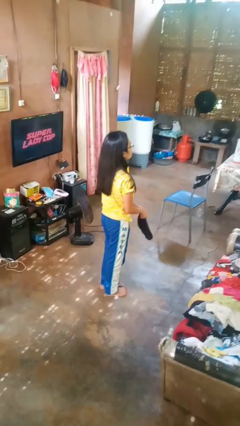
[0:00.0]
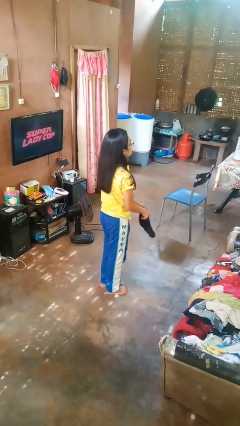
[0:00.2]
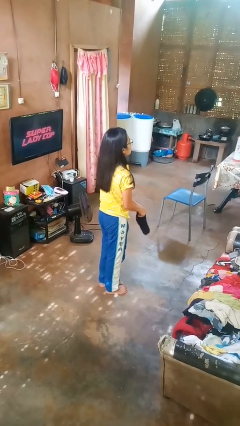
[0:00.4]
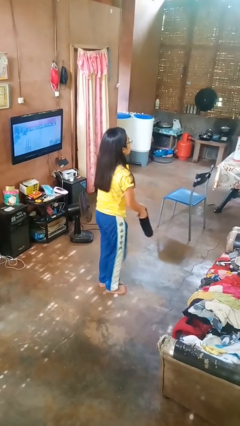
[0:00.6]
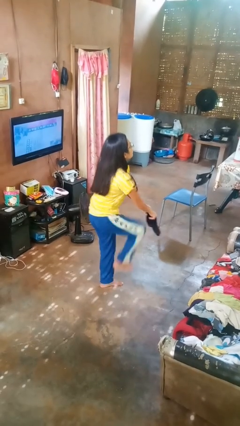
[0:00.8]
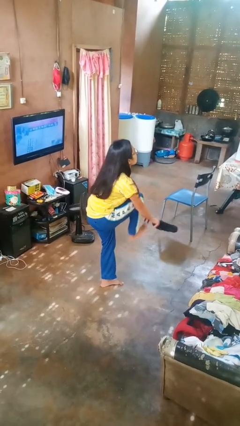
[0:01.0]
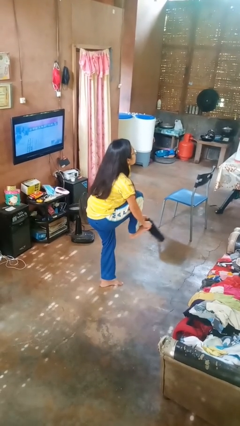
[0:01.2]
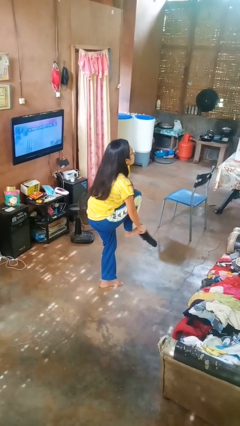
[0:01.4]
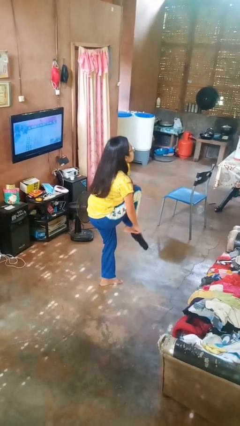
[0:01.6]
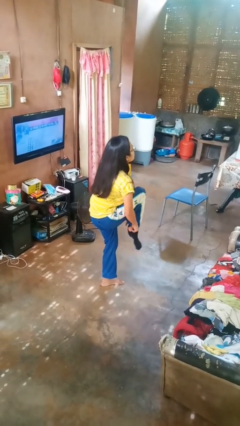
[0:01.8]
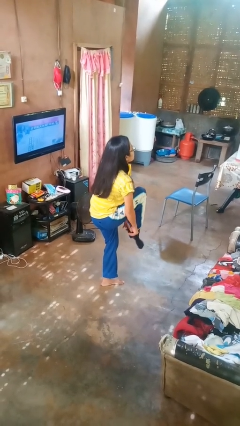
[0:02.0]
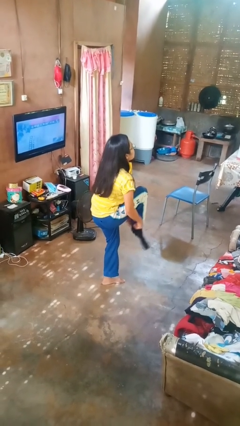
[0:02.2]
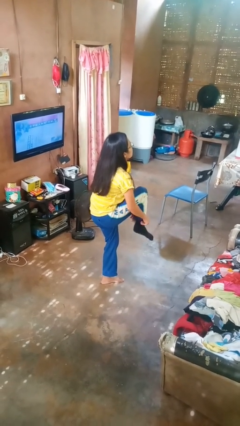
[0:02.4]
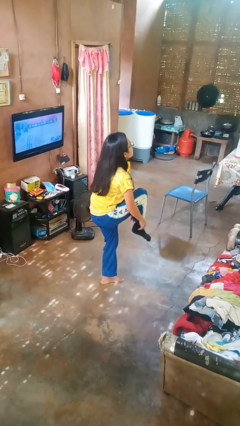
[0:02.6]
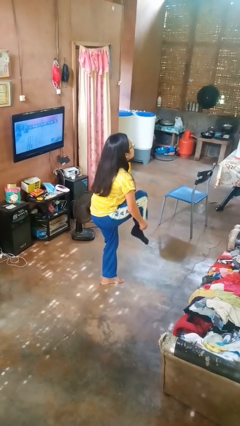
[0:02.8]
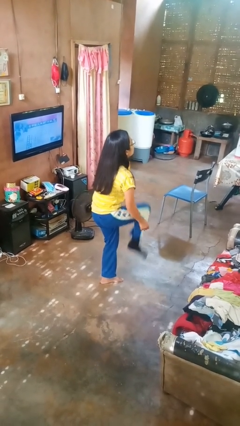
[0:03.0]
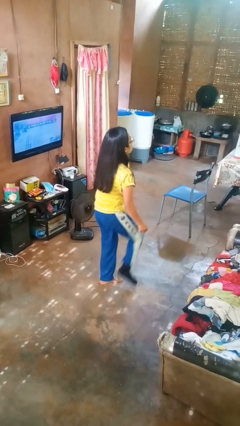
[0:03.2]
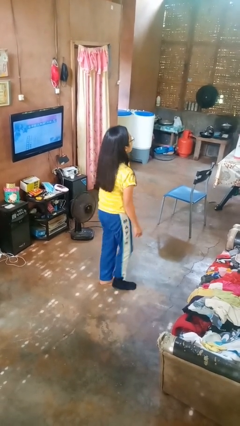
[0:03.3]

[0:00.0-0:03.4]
person puts on socks

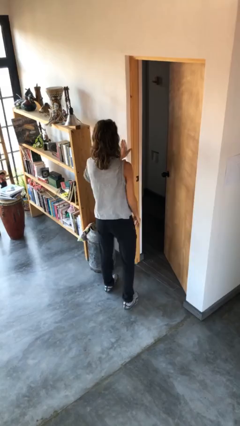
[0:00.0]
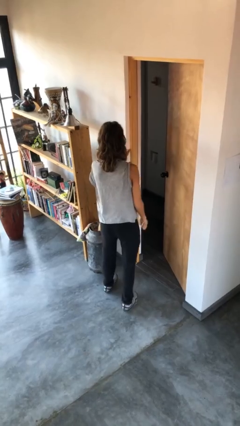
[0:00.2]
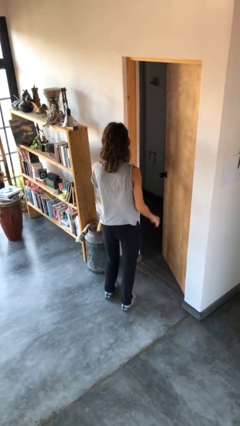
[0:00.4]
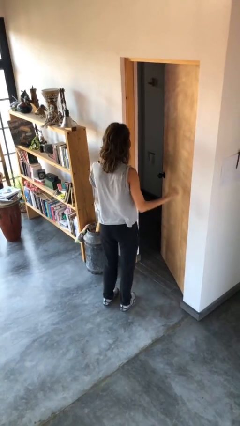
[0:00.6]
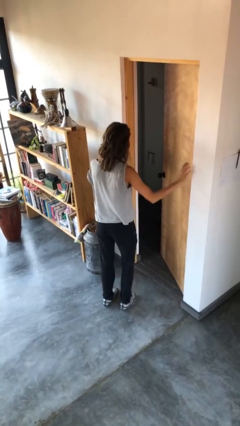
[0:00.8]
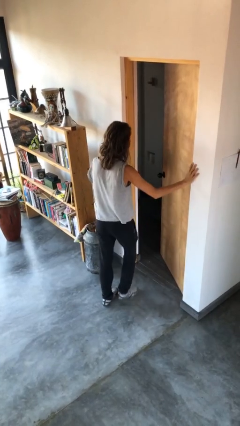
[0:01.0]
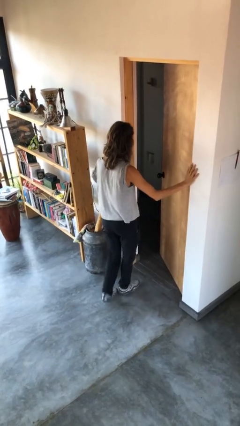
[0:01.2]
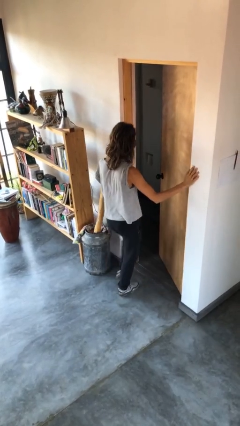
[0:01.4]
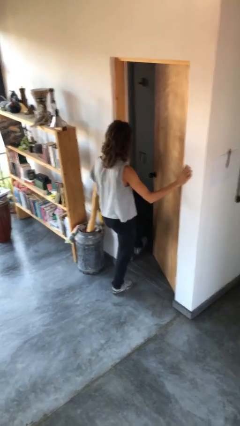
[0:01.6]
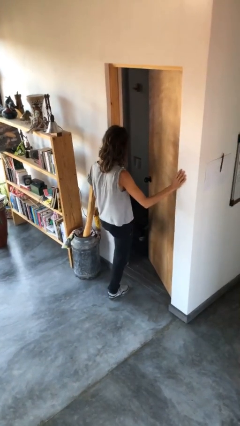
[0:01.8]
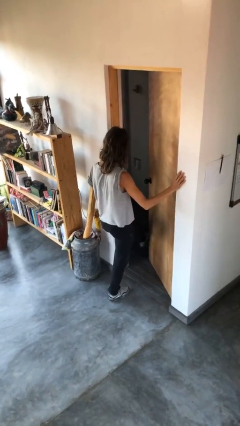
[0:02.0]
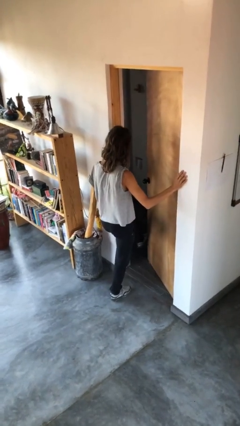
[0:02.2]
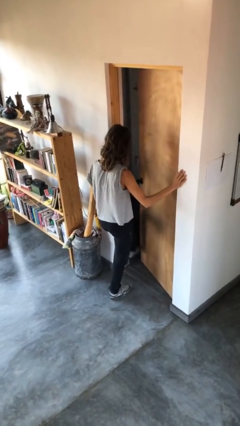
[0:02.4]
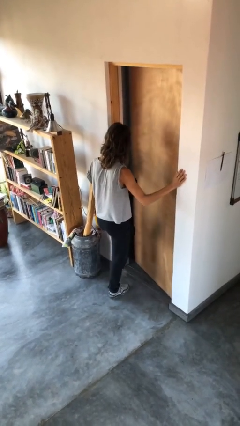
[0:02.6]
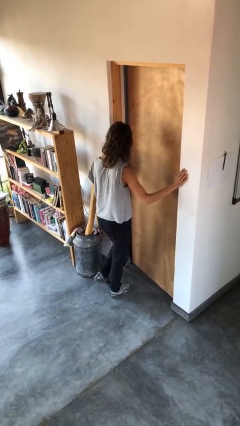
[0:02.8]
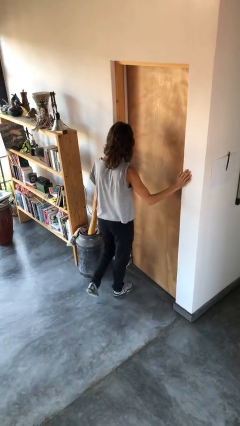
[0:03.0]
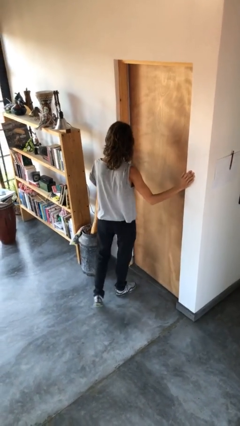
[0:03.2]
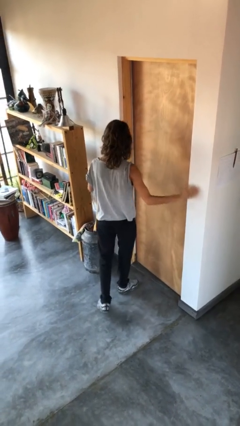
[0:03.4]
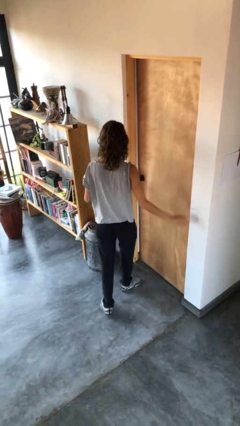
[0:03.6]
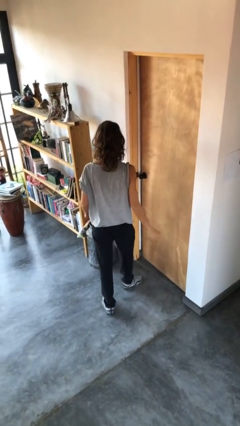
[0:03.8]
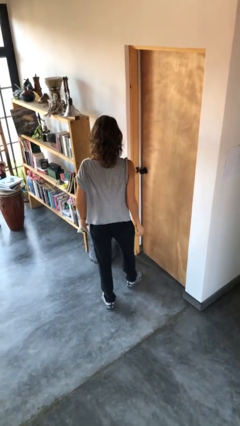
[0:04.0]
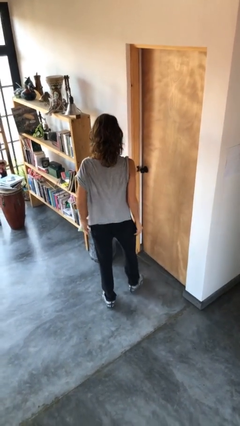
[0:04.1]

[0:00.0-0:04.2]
person closes door with foot

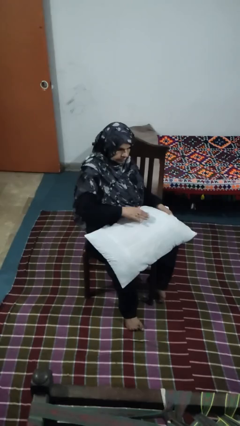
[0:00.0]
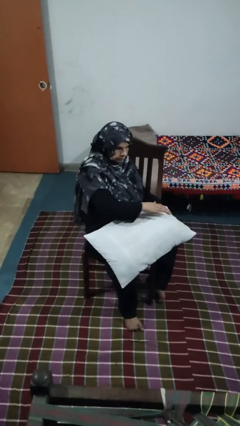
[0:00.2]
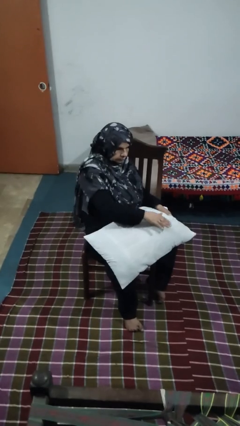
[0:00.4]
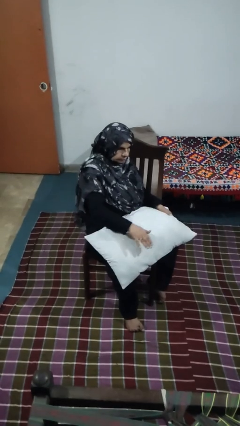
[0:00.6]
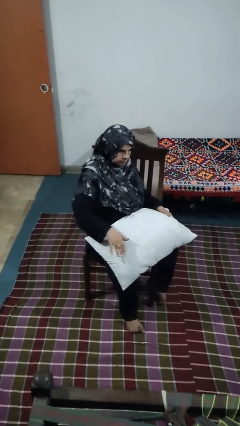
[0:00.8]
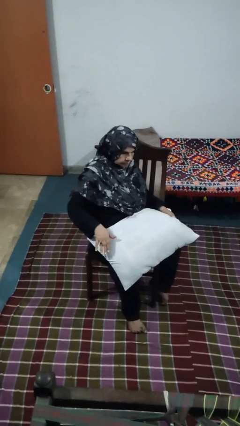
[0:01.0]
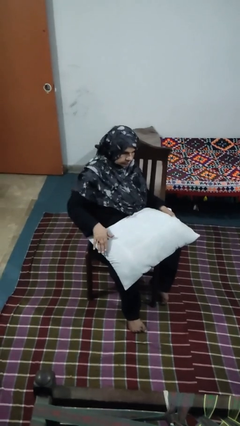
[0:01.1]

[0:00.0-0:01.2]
person waves hand over object

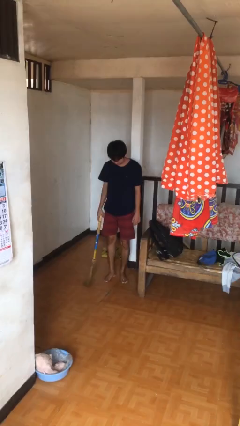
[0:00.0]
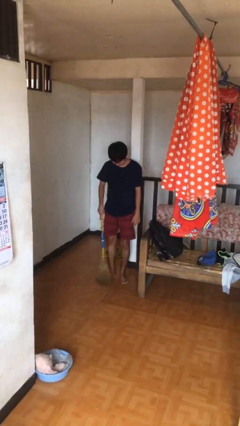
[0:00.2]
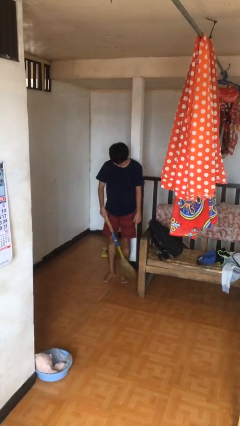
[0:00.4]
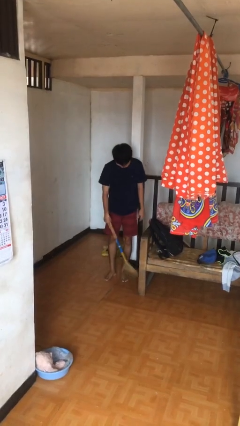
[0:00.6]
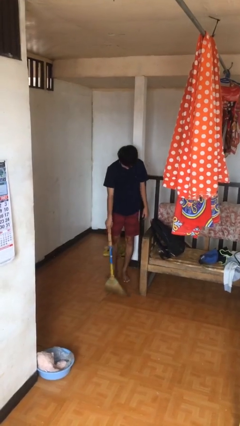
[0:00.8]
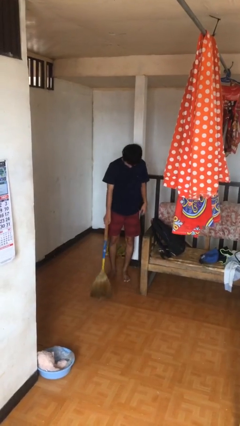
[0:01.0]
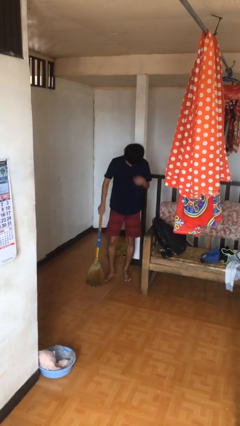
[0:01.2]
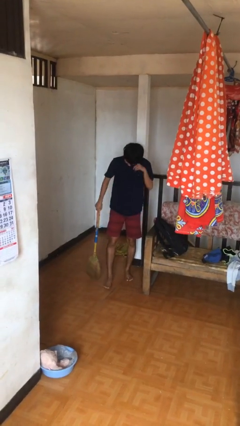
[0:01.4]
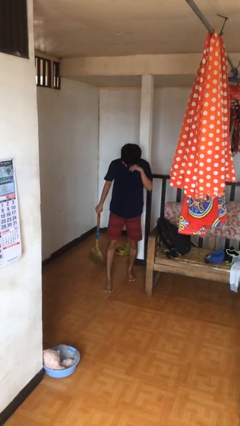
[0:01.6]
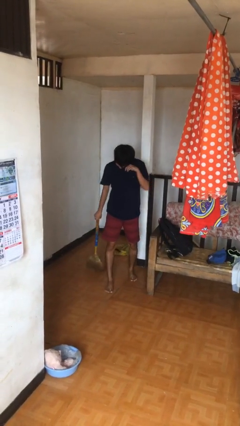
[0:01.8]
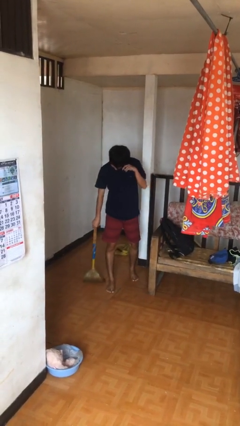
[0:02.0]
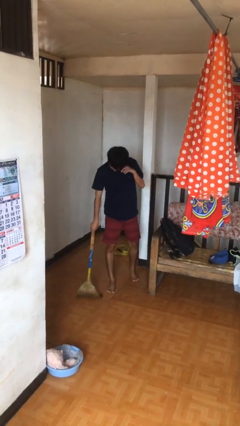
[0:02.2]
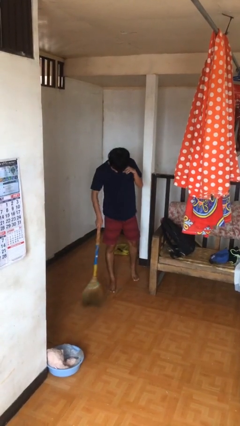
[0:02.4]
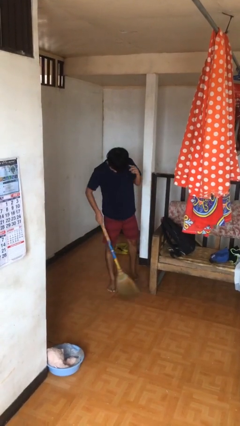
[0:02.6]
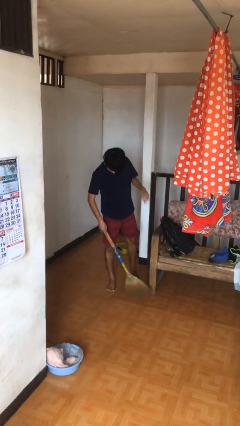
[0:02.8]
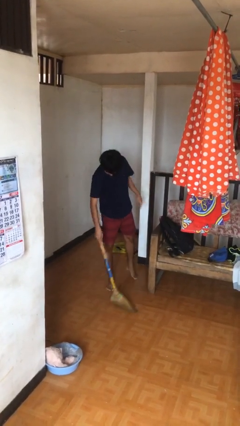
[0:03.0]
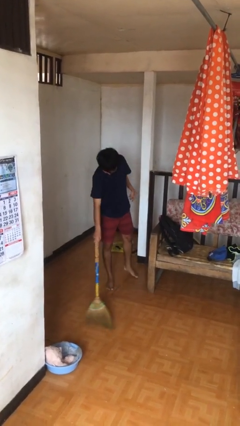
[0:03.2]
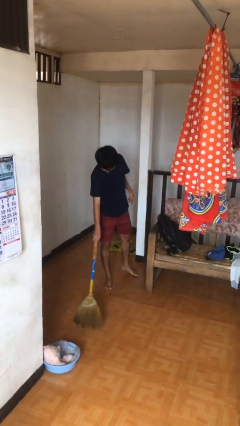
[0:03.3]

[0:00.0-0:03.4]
person sweeps floor

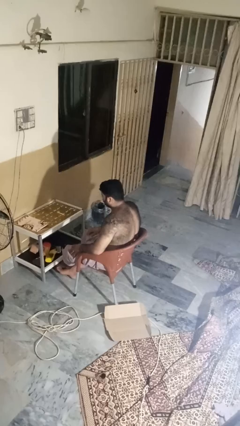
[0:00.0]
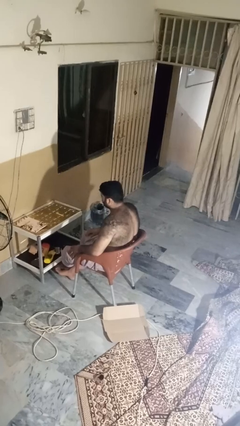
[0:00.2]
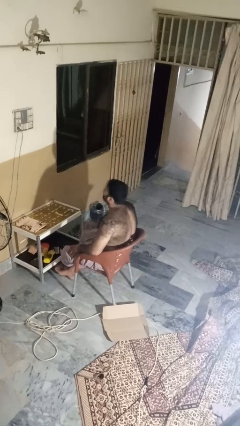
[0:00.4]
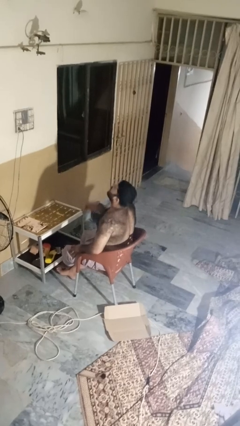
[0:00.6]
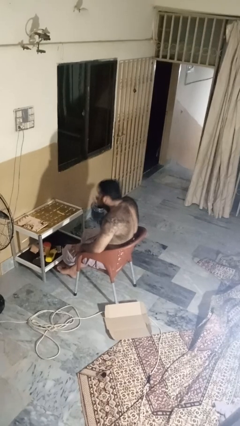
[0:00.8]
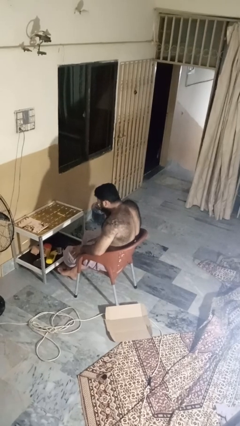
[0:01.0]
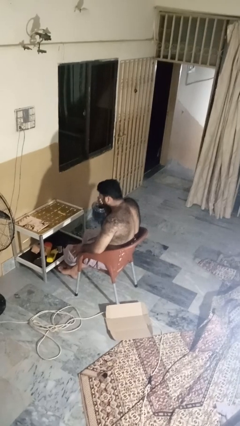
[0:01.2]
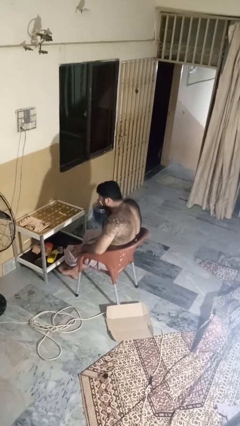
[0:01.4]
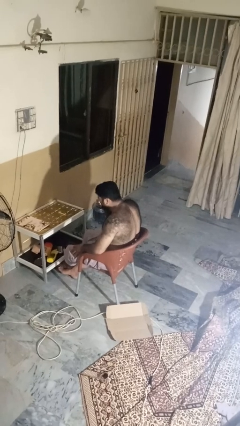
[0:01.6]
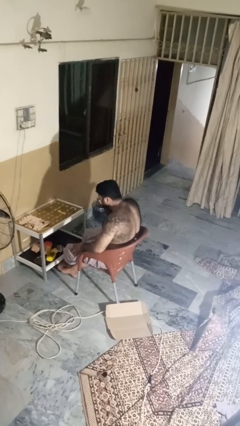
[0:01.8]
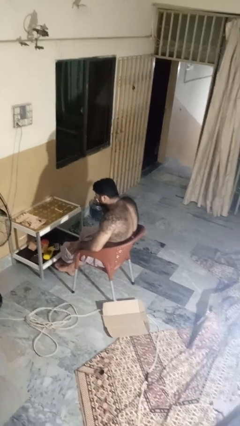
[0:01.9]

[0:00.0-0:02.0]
person sneezes into hand

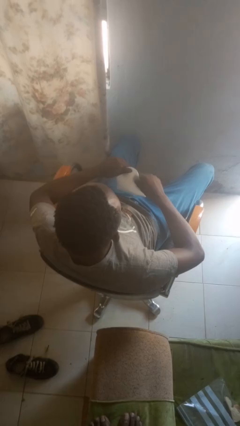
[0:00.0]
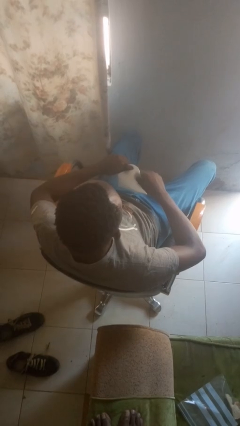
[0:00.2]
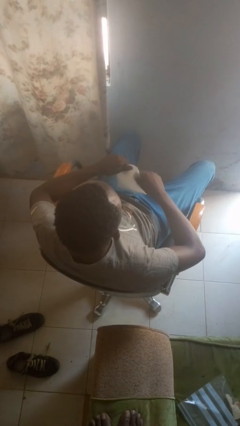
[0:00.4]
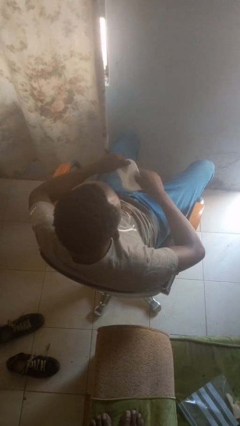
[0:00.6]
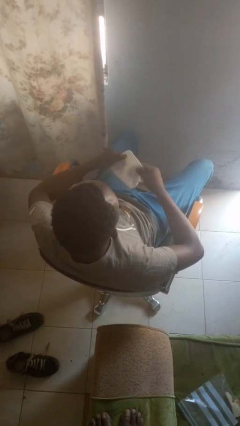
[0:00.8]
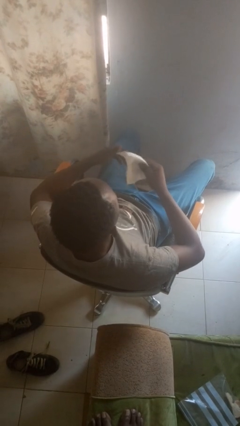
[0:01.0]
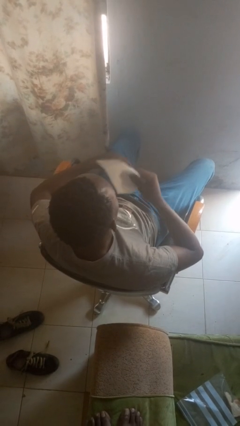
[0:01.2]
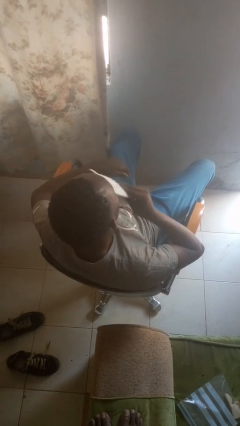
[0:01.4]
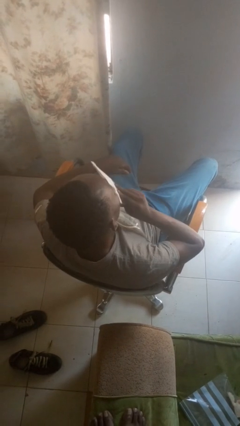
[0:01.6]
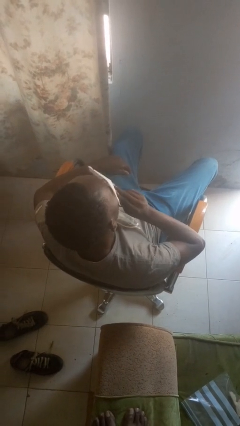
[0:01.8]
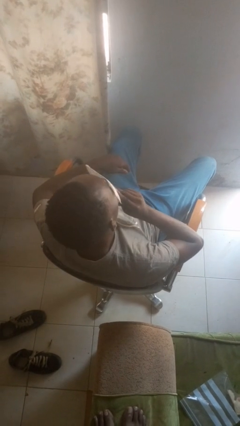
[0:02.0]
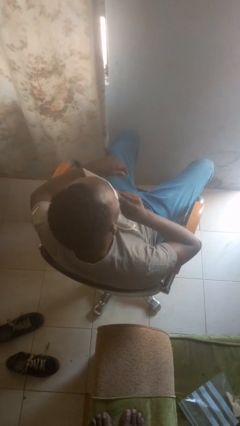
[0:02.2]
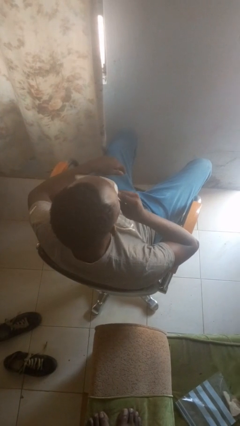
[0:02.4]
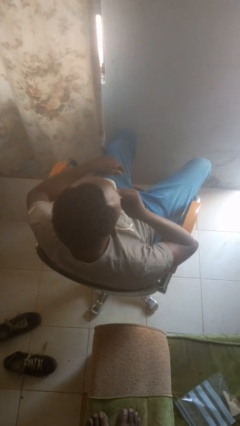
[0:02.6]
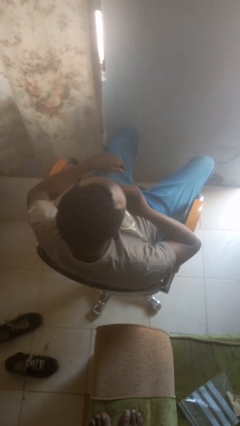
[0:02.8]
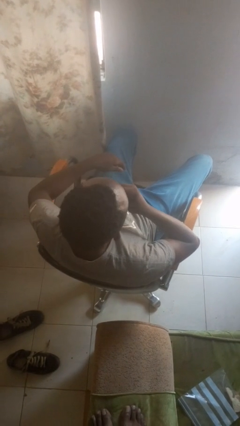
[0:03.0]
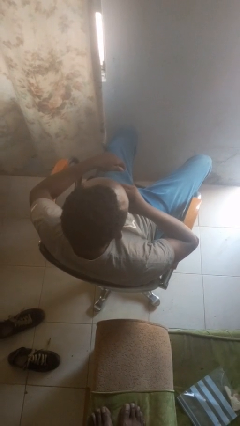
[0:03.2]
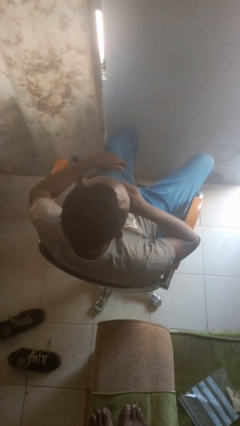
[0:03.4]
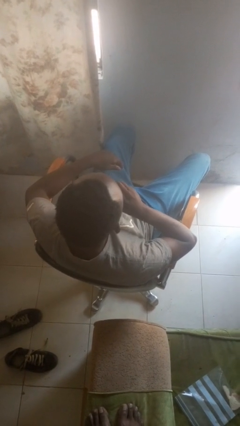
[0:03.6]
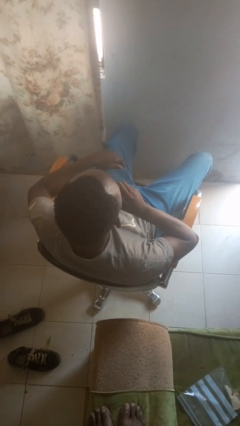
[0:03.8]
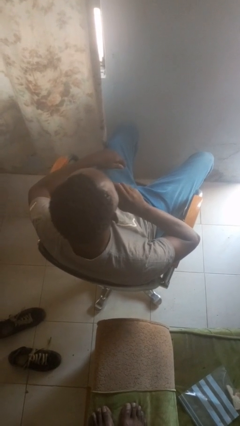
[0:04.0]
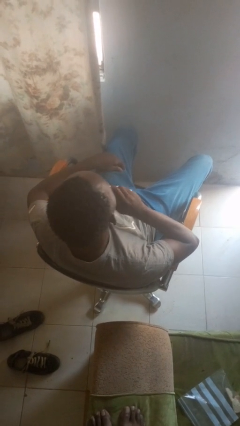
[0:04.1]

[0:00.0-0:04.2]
person wipes mouth with napkin
